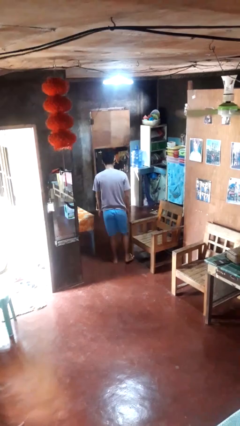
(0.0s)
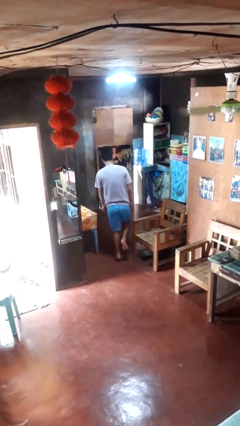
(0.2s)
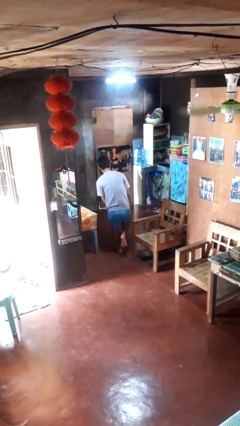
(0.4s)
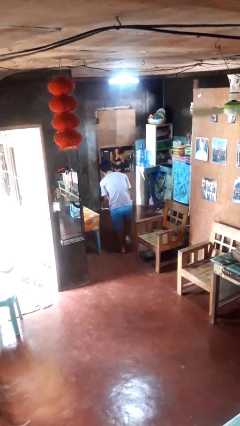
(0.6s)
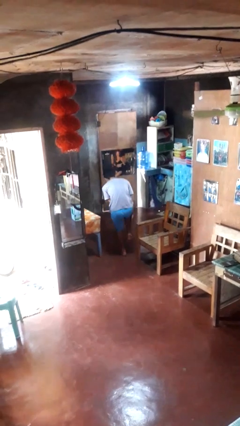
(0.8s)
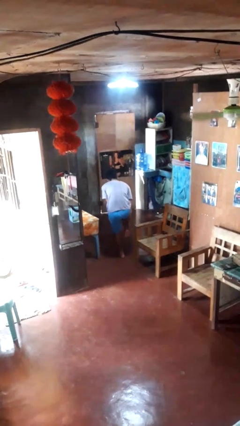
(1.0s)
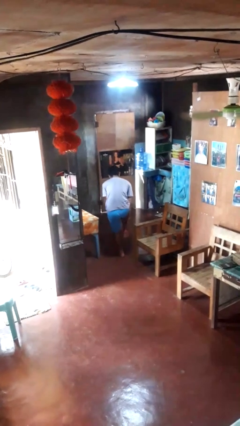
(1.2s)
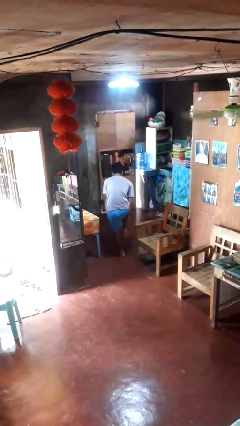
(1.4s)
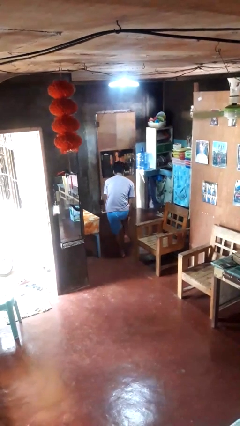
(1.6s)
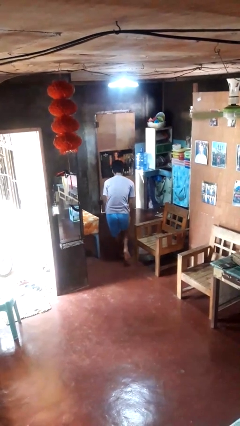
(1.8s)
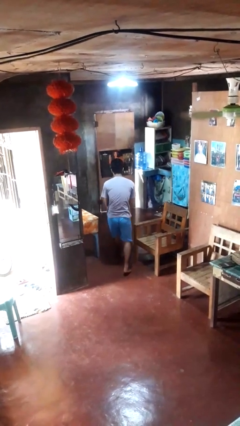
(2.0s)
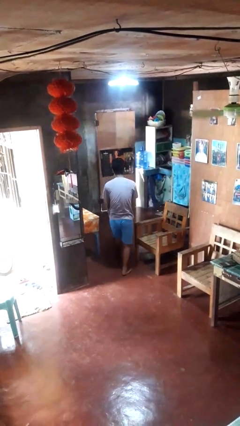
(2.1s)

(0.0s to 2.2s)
person stubs toe

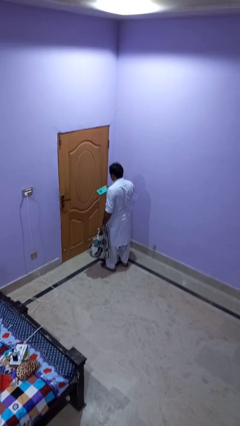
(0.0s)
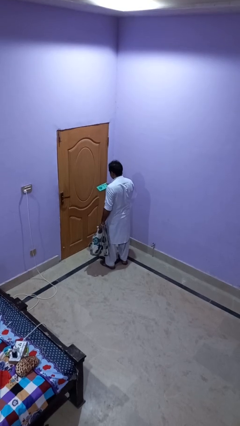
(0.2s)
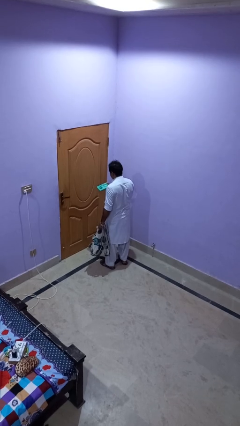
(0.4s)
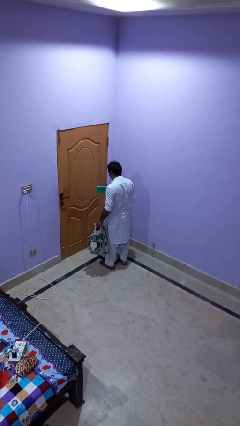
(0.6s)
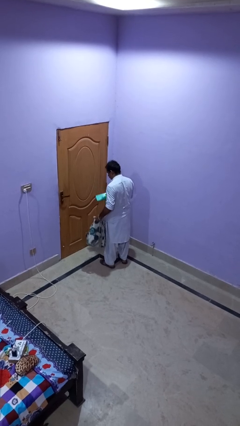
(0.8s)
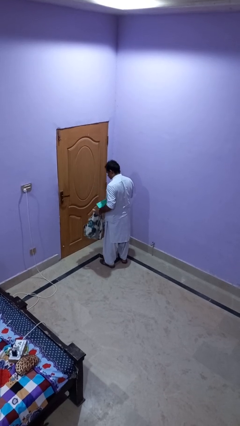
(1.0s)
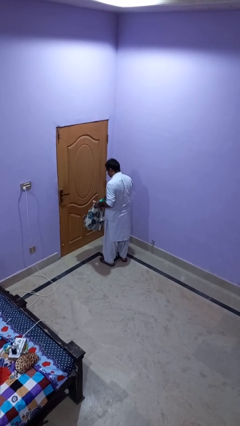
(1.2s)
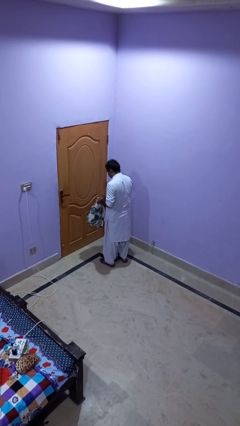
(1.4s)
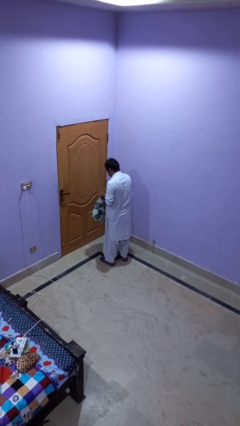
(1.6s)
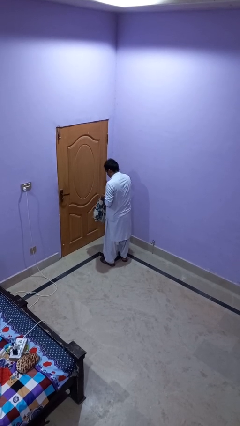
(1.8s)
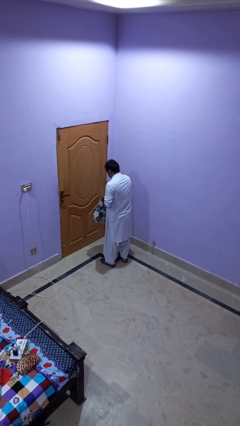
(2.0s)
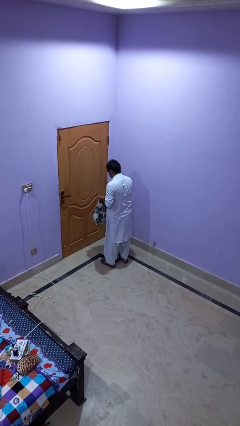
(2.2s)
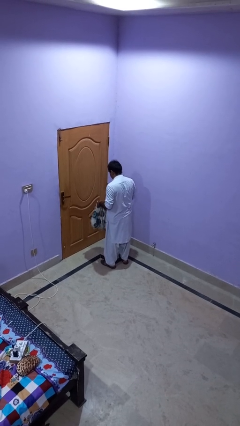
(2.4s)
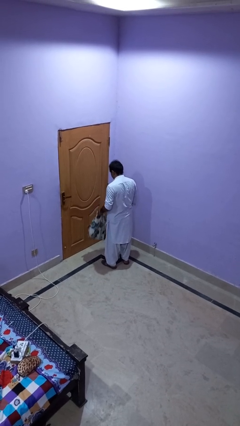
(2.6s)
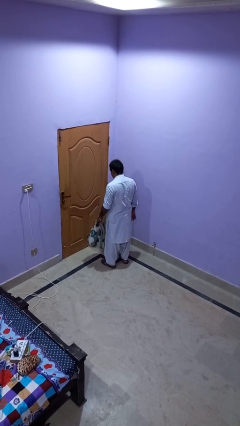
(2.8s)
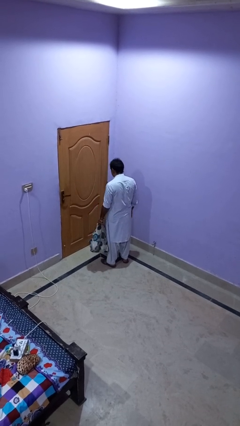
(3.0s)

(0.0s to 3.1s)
person puts object into backpack

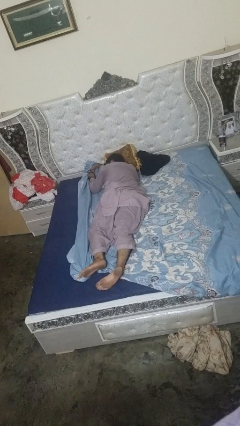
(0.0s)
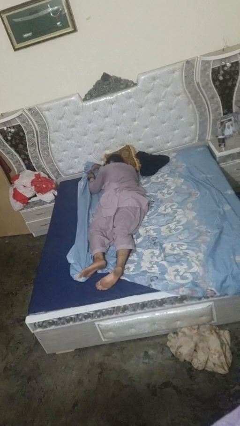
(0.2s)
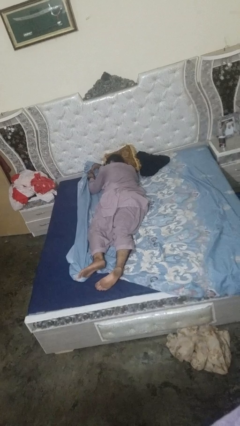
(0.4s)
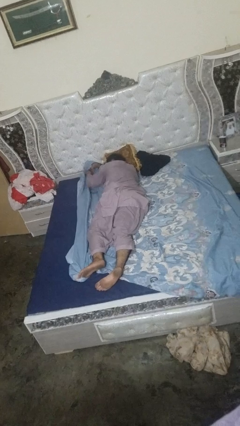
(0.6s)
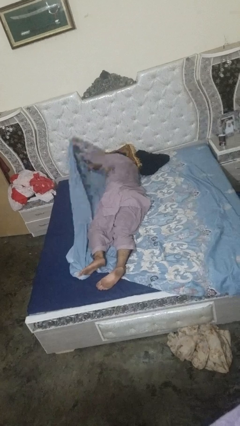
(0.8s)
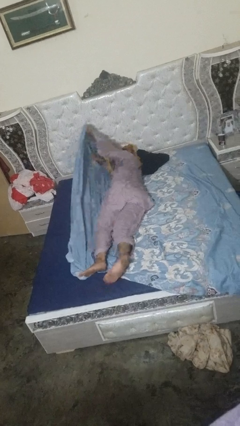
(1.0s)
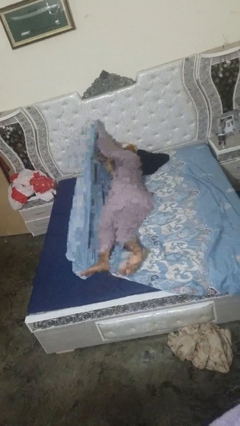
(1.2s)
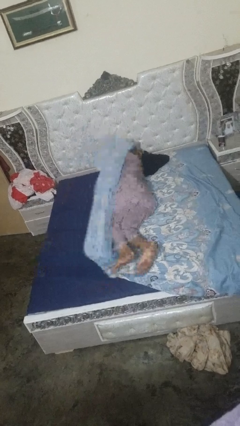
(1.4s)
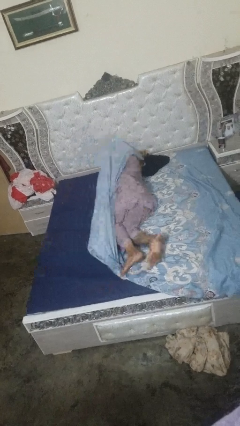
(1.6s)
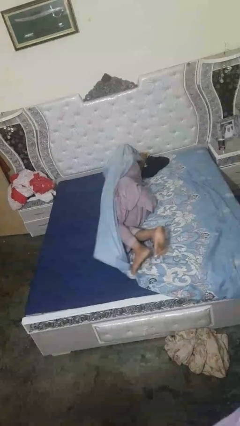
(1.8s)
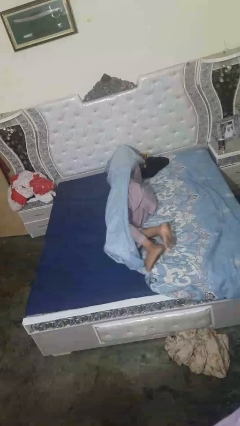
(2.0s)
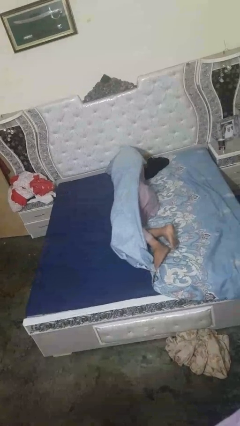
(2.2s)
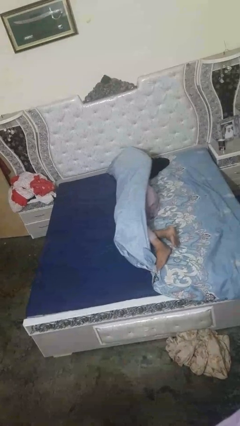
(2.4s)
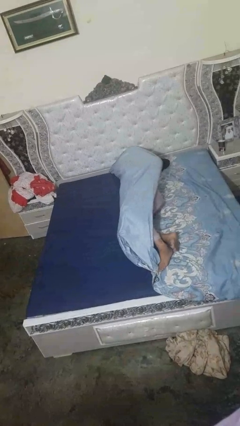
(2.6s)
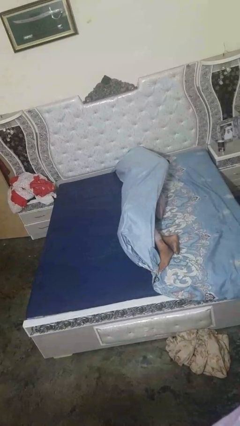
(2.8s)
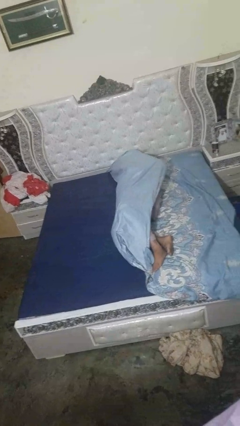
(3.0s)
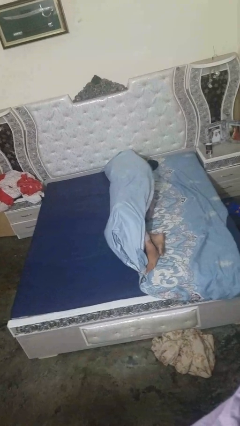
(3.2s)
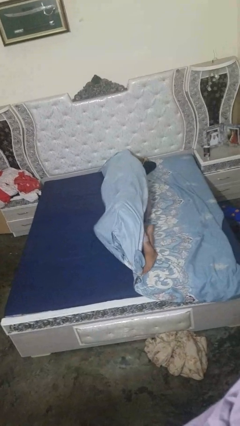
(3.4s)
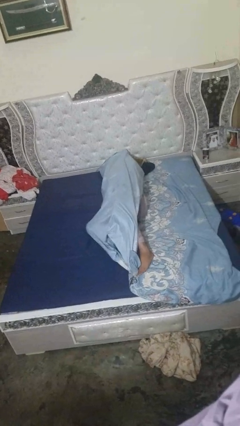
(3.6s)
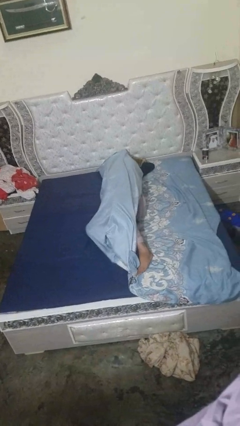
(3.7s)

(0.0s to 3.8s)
person covers with bedsheets

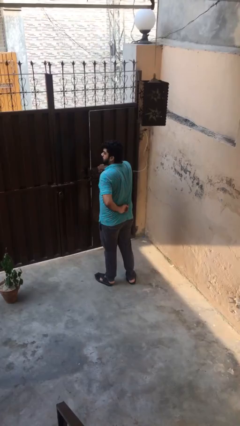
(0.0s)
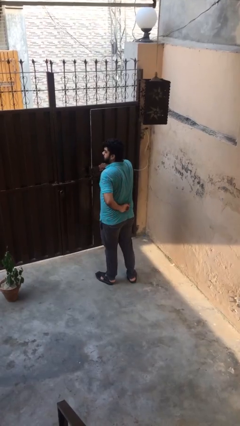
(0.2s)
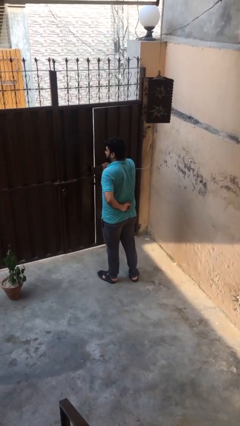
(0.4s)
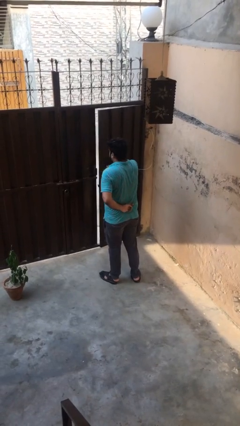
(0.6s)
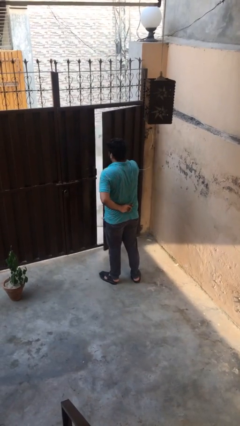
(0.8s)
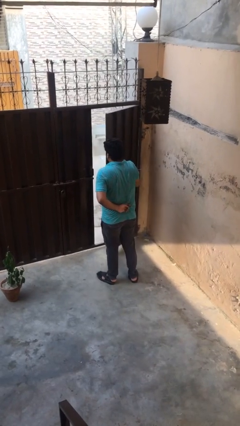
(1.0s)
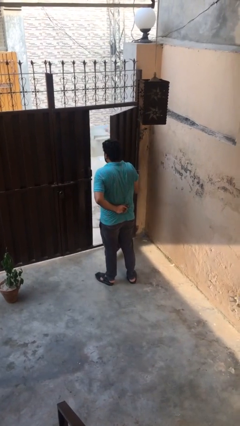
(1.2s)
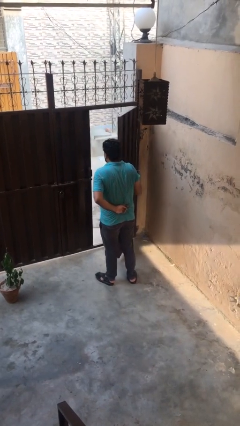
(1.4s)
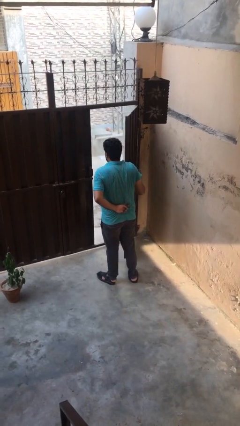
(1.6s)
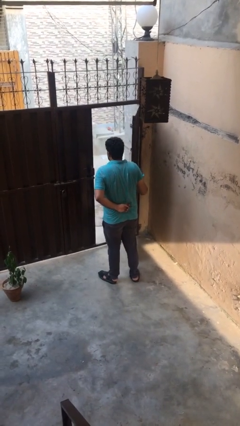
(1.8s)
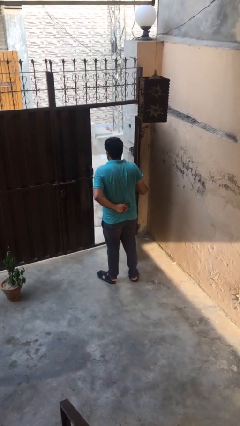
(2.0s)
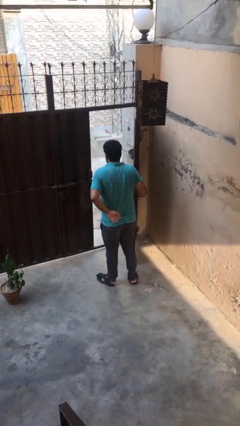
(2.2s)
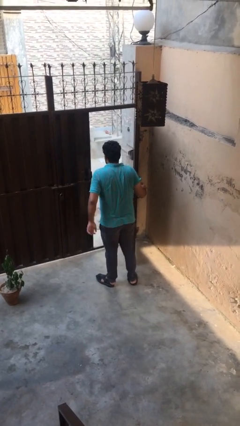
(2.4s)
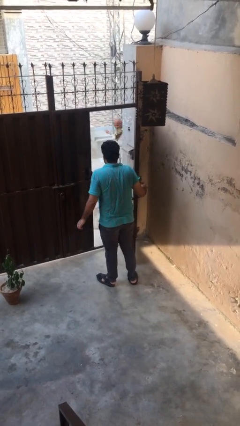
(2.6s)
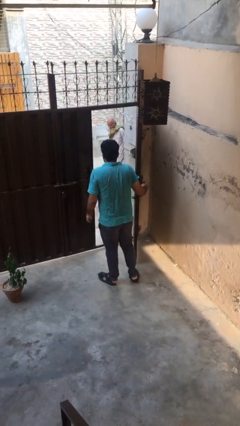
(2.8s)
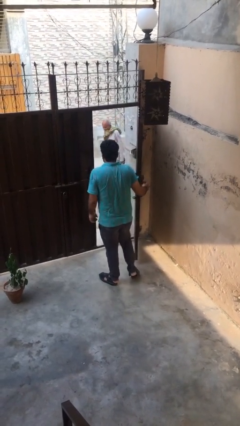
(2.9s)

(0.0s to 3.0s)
person opens facility door

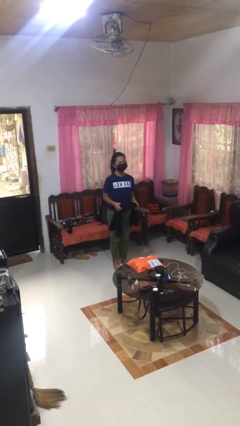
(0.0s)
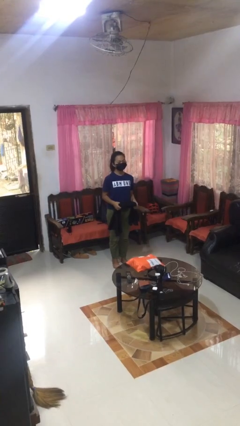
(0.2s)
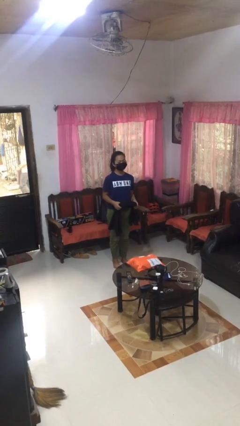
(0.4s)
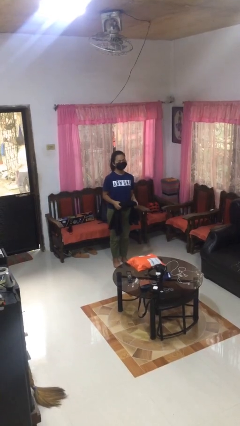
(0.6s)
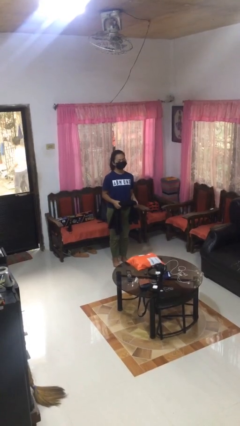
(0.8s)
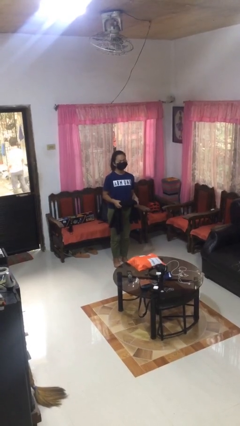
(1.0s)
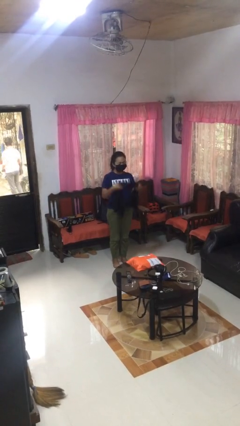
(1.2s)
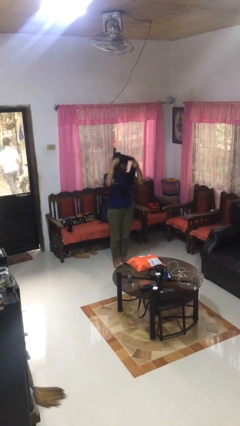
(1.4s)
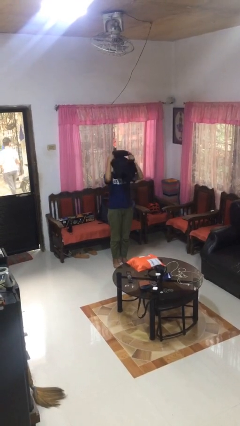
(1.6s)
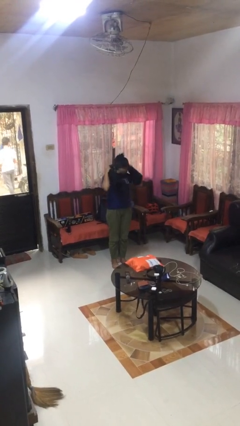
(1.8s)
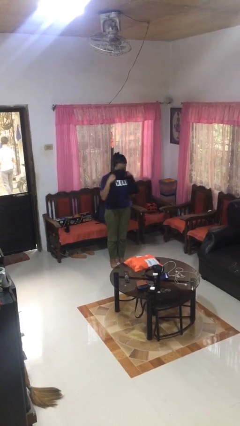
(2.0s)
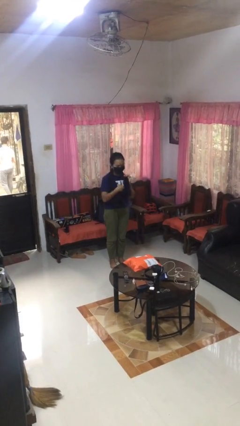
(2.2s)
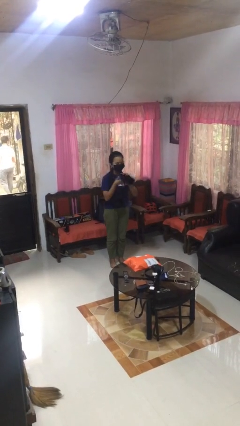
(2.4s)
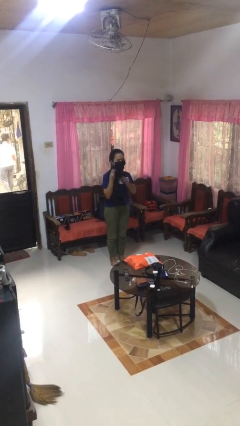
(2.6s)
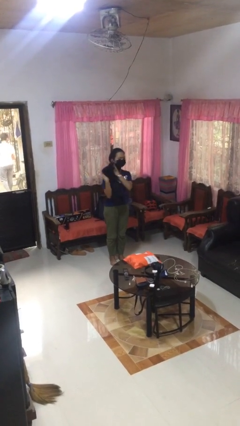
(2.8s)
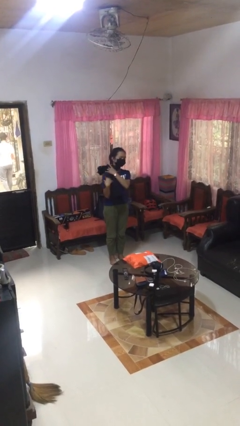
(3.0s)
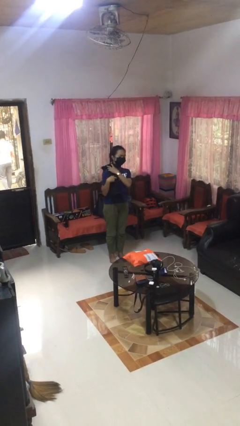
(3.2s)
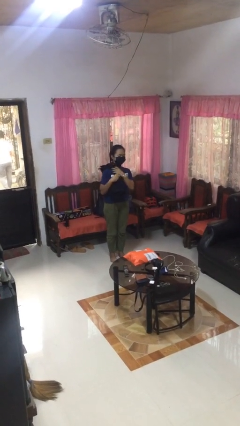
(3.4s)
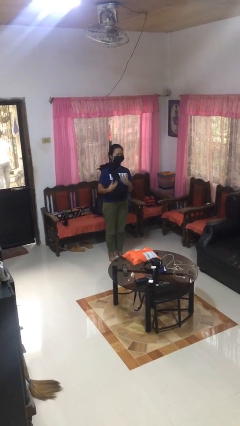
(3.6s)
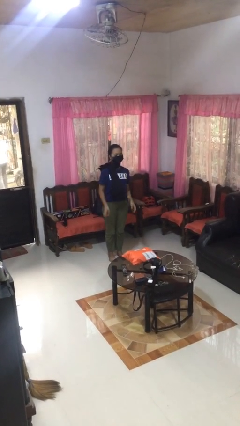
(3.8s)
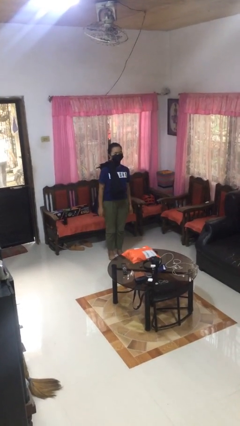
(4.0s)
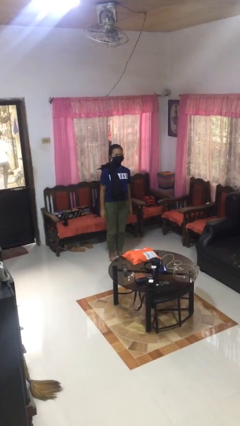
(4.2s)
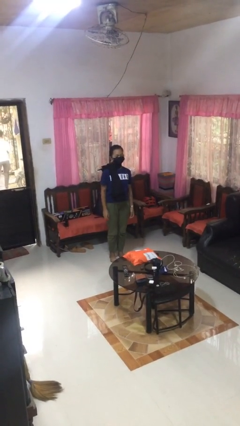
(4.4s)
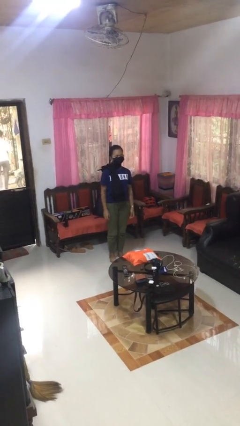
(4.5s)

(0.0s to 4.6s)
person puts on scarf

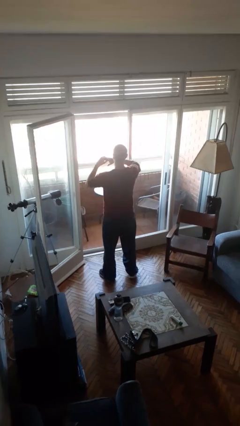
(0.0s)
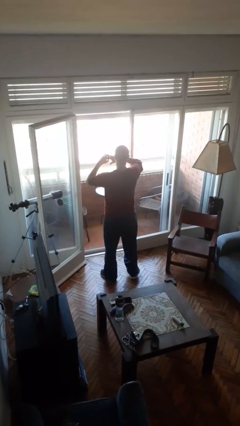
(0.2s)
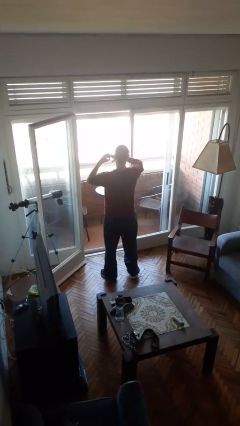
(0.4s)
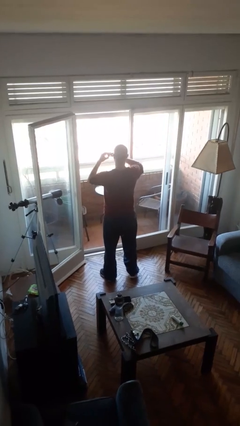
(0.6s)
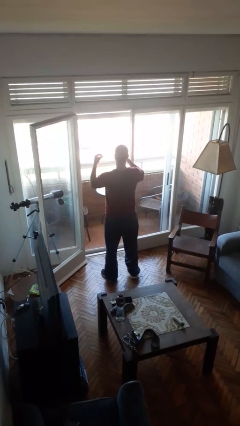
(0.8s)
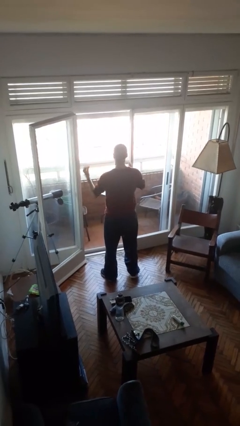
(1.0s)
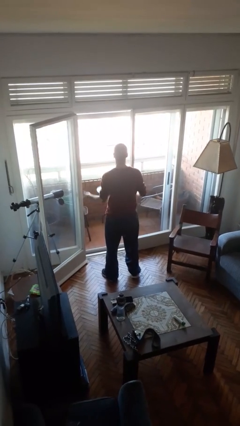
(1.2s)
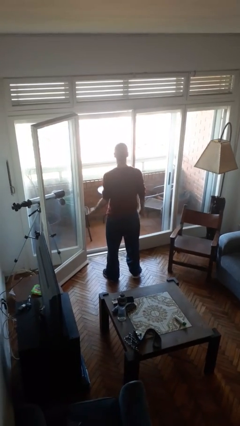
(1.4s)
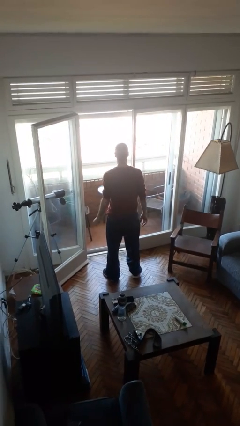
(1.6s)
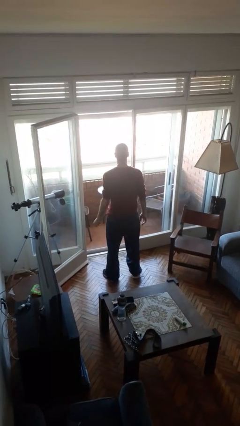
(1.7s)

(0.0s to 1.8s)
person takes off ring
